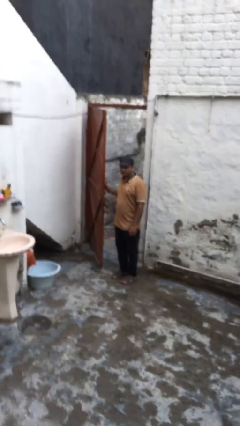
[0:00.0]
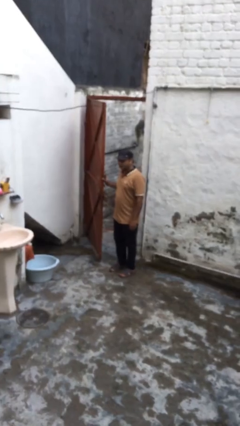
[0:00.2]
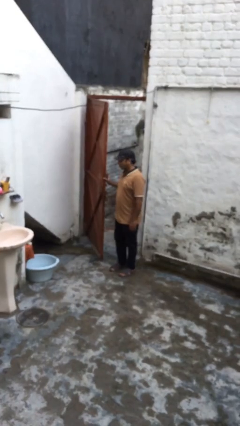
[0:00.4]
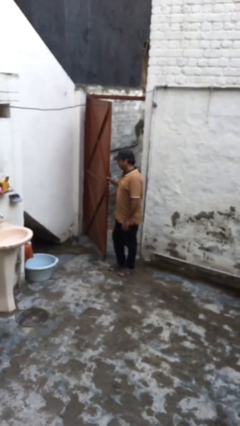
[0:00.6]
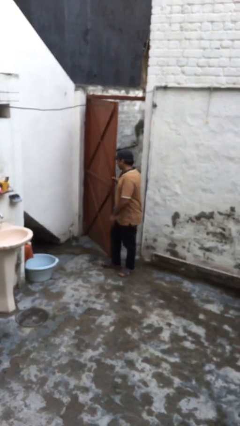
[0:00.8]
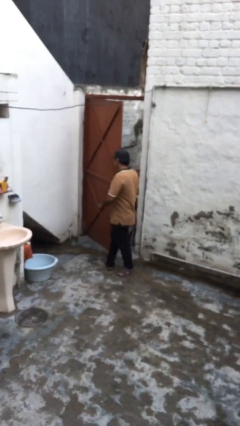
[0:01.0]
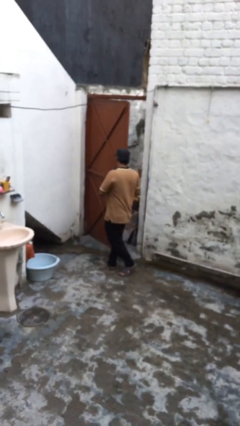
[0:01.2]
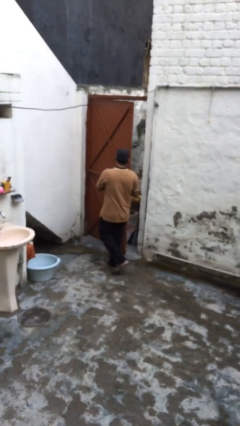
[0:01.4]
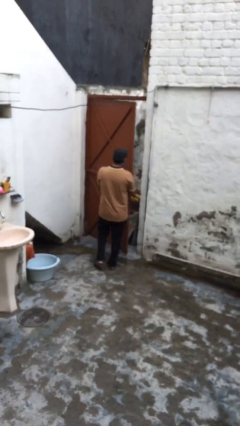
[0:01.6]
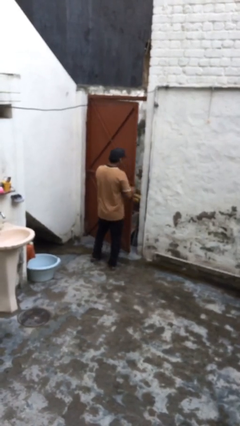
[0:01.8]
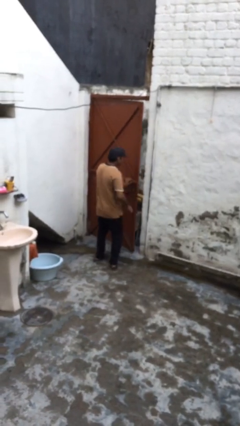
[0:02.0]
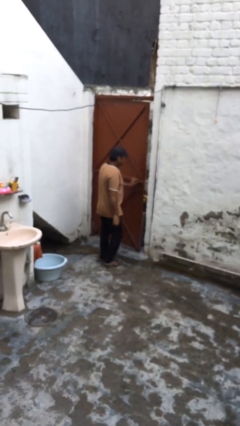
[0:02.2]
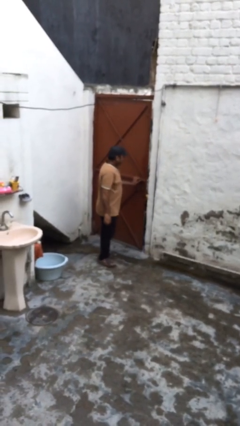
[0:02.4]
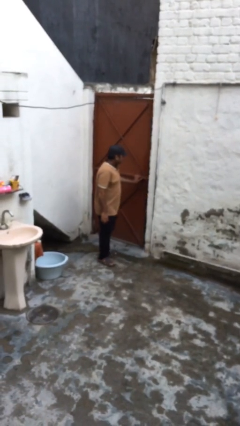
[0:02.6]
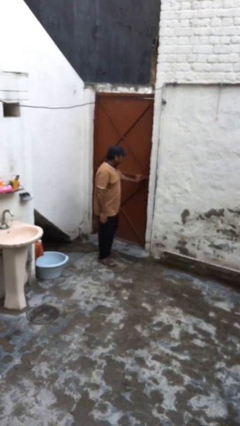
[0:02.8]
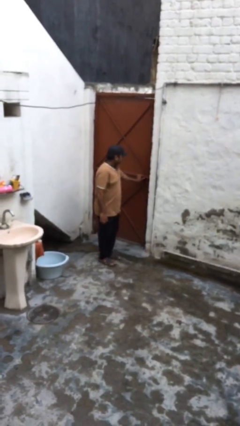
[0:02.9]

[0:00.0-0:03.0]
person closes facility door

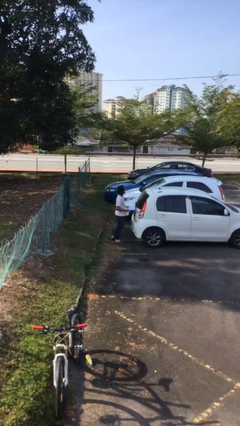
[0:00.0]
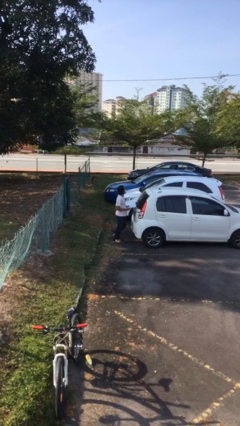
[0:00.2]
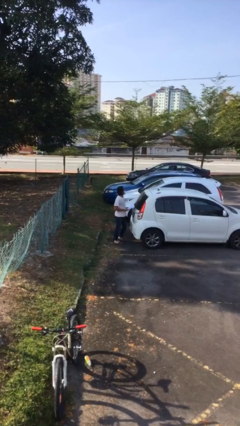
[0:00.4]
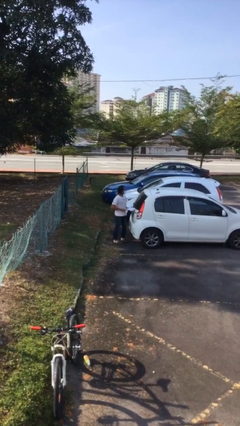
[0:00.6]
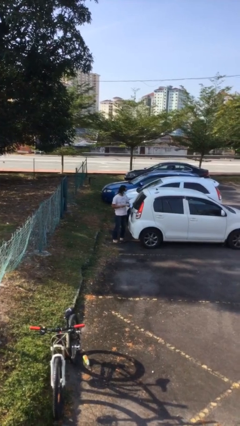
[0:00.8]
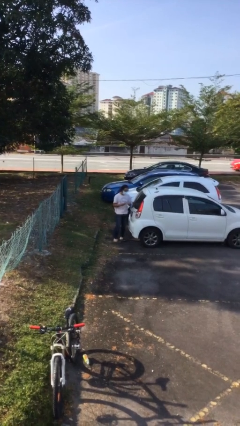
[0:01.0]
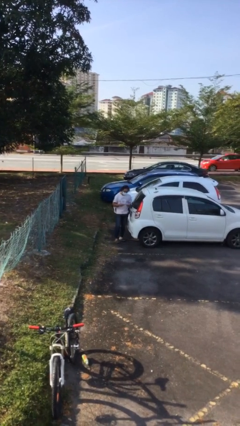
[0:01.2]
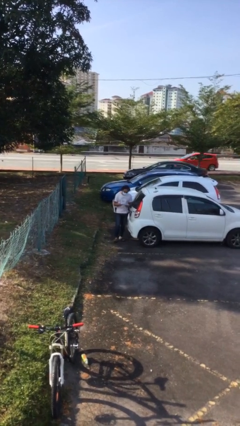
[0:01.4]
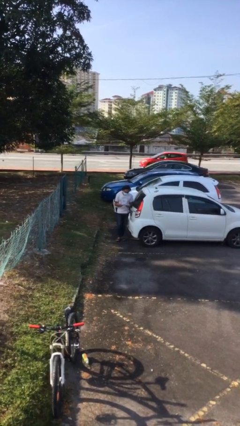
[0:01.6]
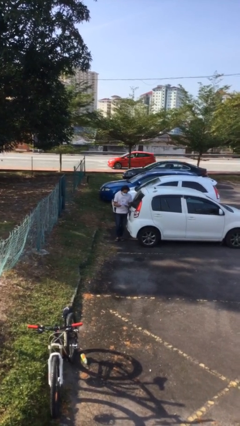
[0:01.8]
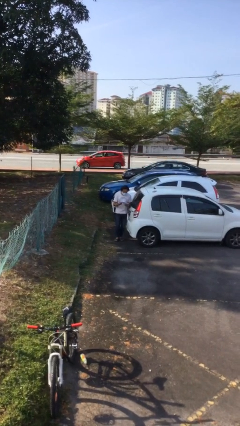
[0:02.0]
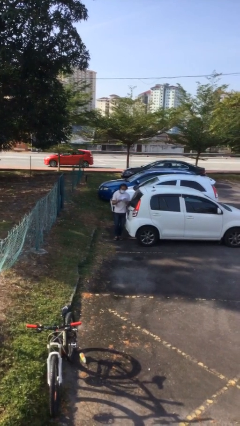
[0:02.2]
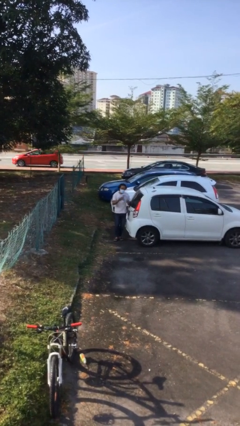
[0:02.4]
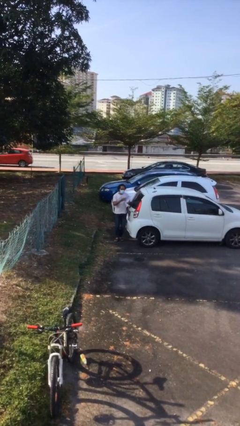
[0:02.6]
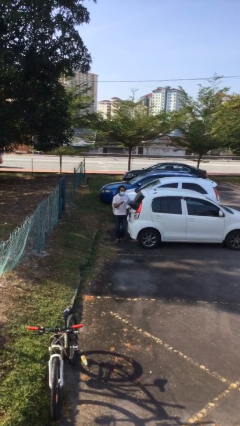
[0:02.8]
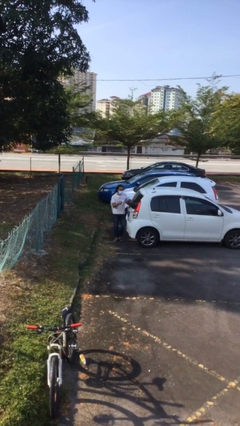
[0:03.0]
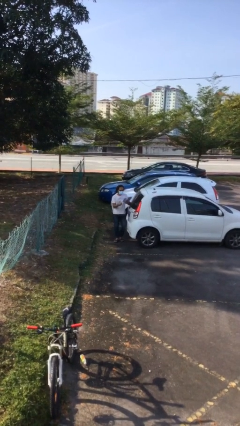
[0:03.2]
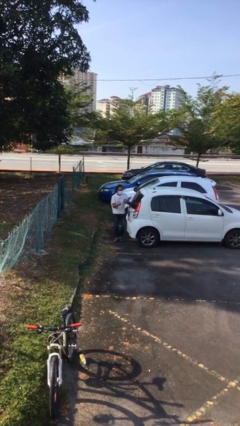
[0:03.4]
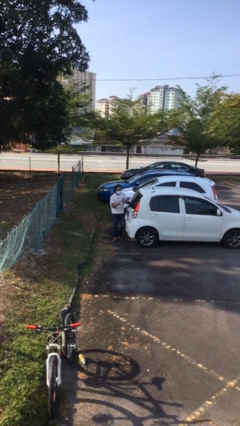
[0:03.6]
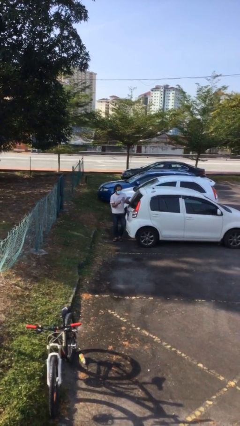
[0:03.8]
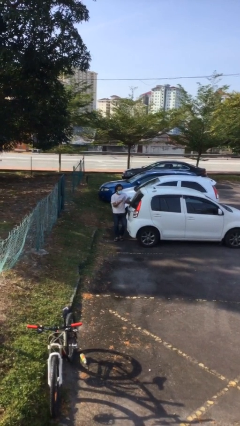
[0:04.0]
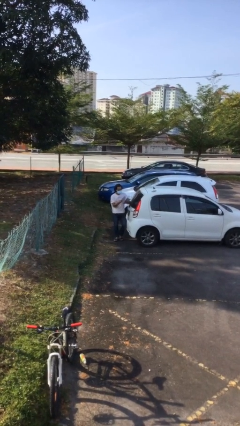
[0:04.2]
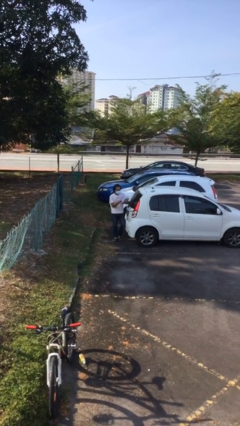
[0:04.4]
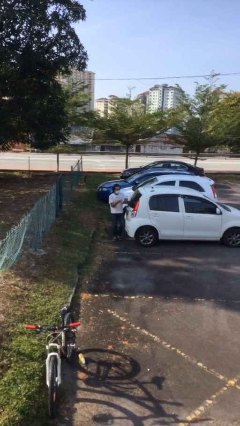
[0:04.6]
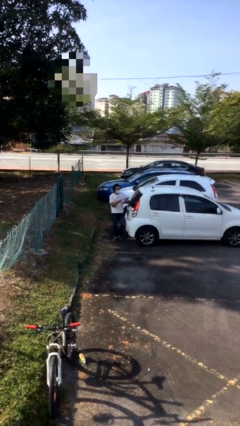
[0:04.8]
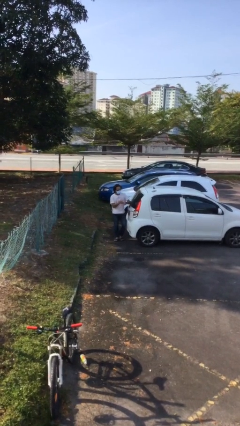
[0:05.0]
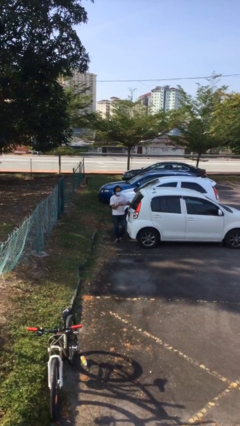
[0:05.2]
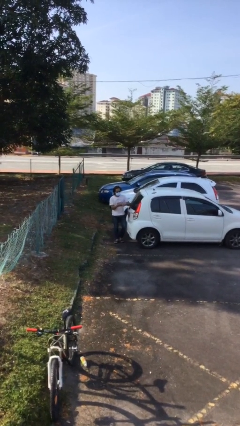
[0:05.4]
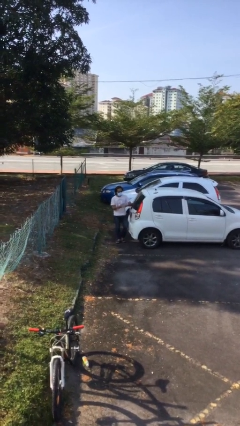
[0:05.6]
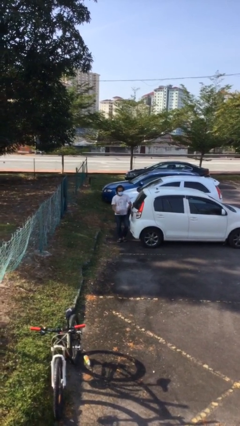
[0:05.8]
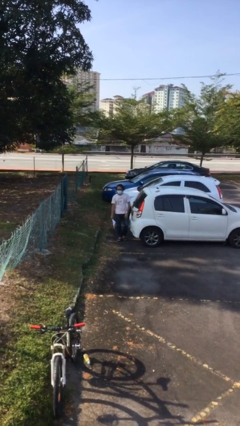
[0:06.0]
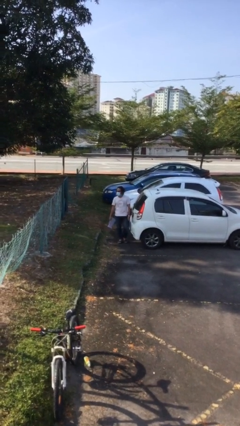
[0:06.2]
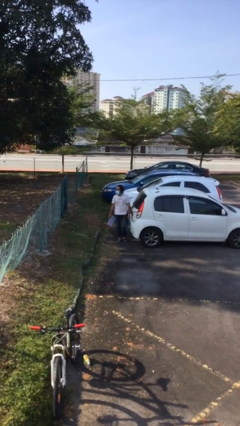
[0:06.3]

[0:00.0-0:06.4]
person reads document

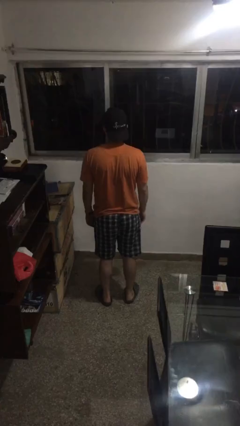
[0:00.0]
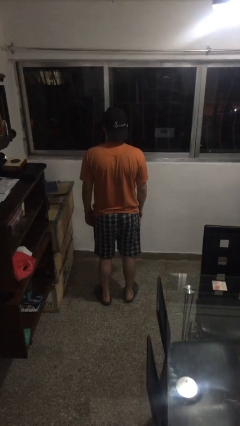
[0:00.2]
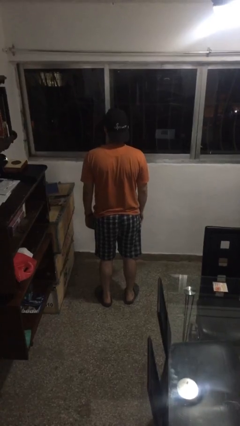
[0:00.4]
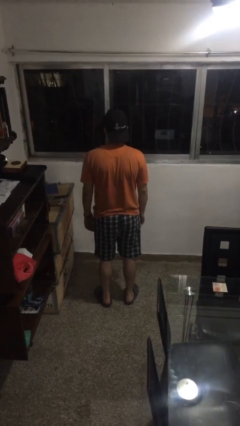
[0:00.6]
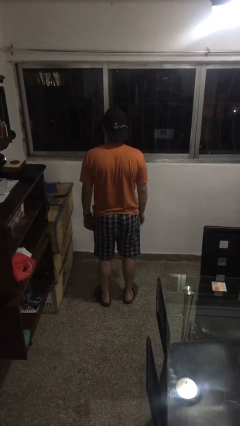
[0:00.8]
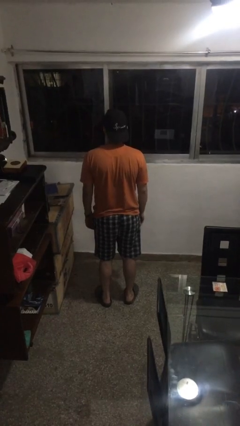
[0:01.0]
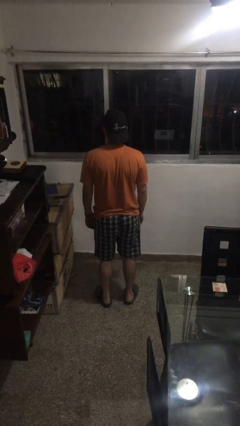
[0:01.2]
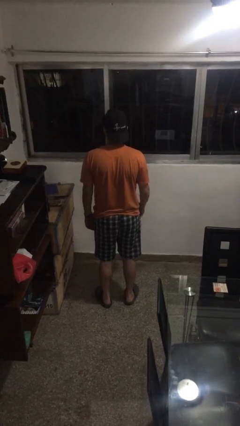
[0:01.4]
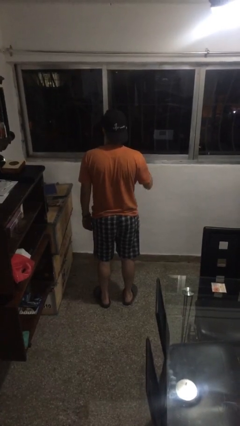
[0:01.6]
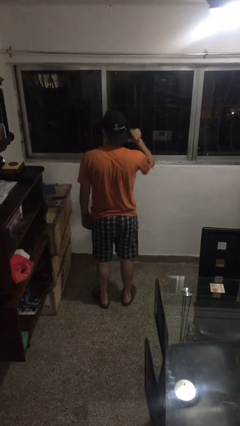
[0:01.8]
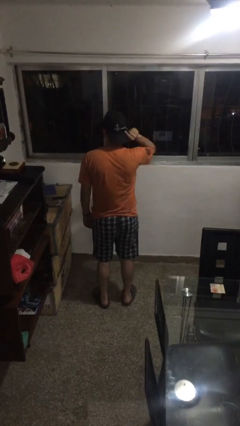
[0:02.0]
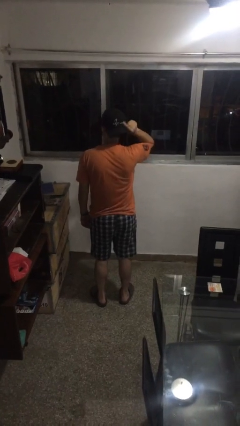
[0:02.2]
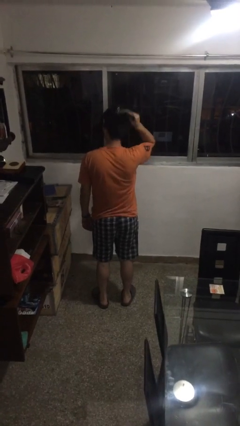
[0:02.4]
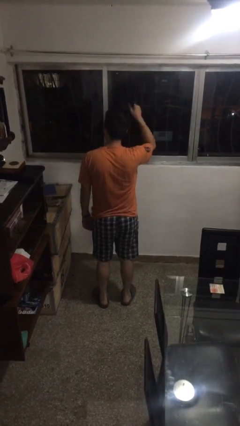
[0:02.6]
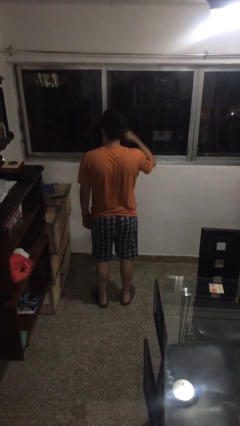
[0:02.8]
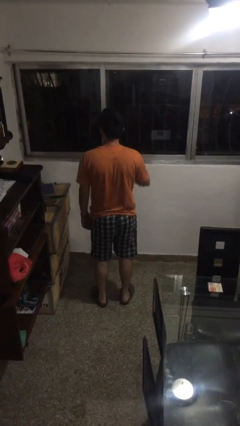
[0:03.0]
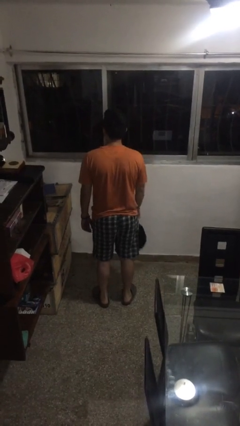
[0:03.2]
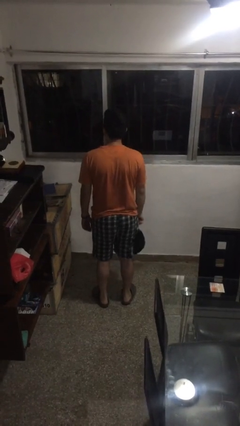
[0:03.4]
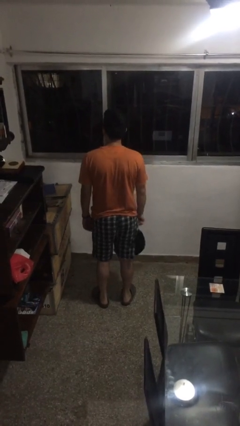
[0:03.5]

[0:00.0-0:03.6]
person takes off hat

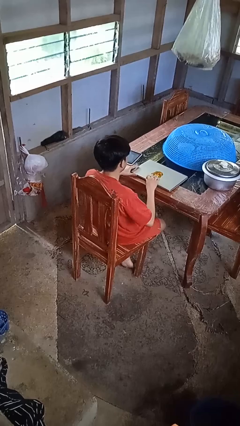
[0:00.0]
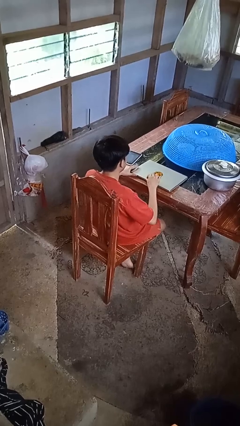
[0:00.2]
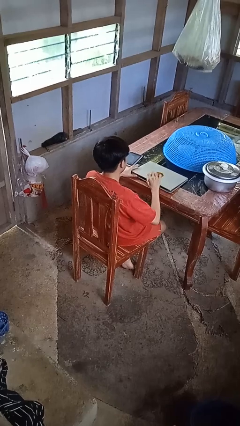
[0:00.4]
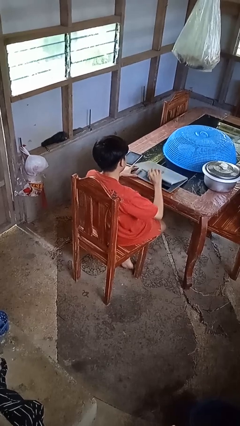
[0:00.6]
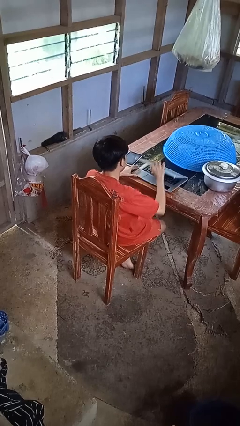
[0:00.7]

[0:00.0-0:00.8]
person opens laptop

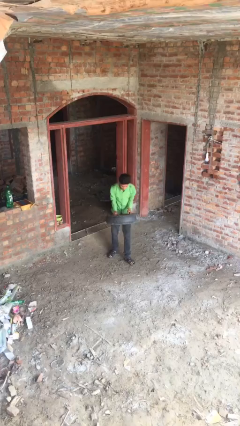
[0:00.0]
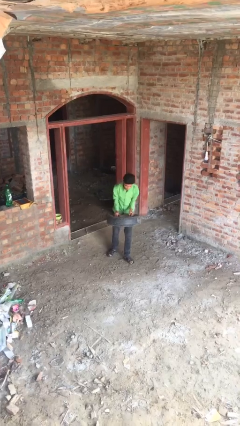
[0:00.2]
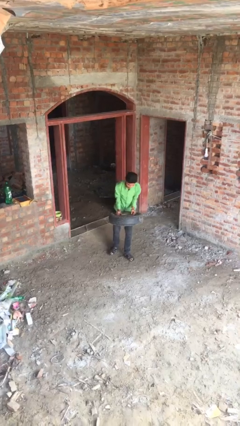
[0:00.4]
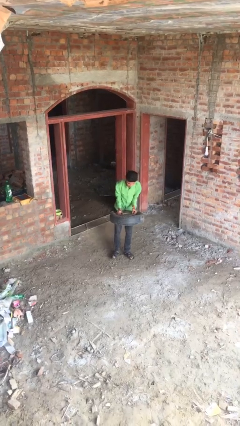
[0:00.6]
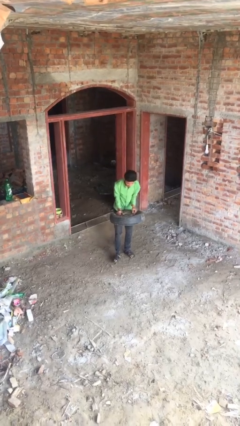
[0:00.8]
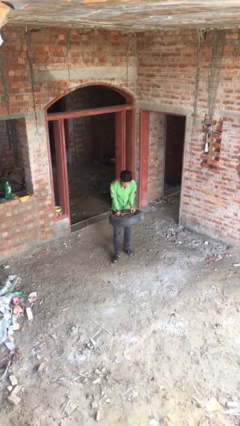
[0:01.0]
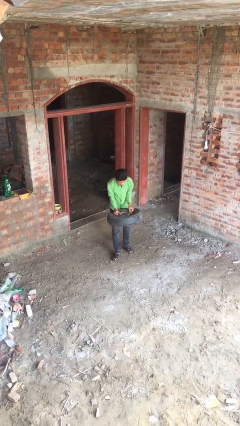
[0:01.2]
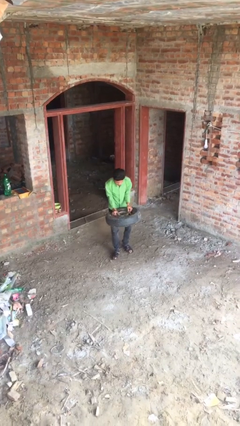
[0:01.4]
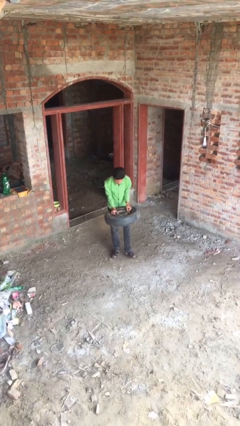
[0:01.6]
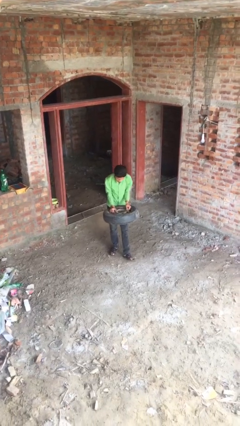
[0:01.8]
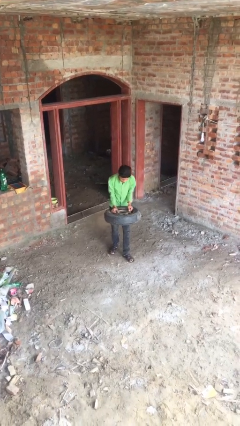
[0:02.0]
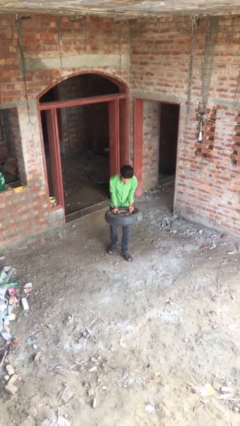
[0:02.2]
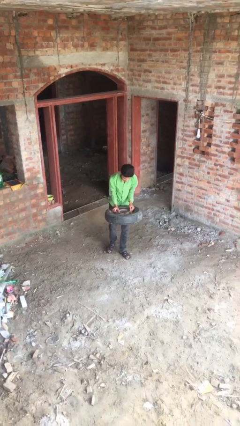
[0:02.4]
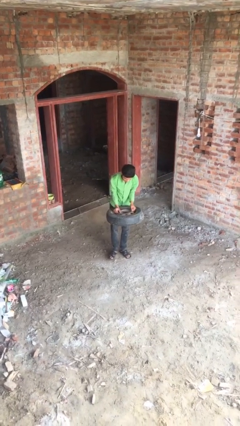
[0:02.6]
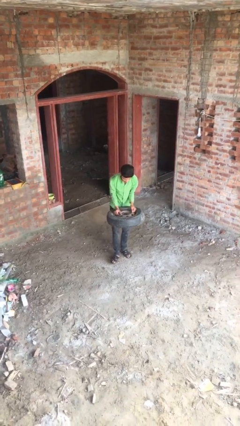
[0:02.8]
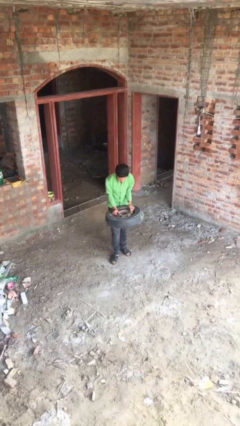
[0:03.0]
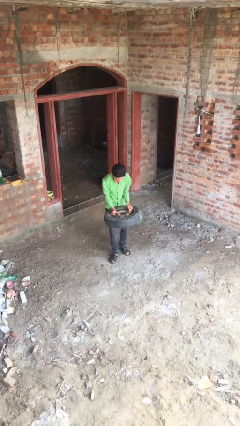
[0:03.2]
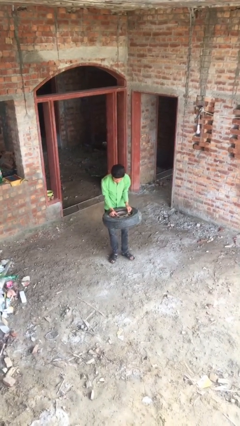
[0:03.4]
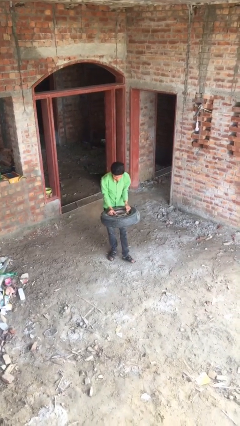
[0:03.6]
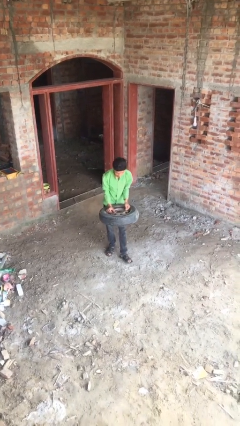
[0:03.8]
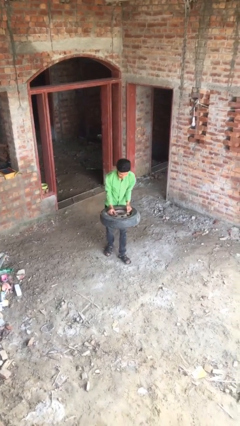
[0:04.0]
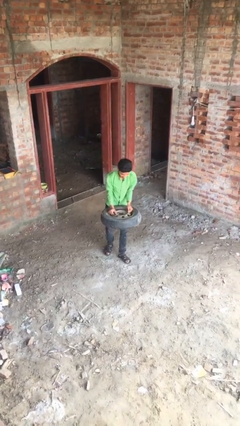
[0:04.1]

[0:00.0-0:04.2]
person carries heavy object
